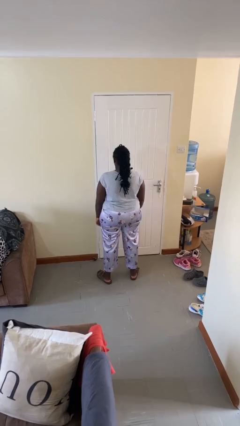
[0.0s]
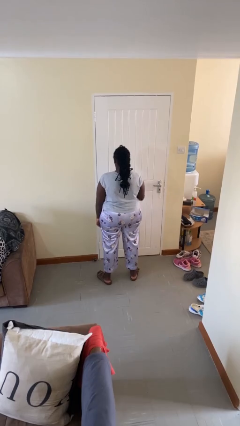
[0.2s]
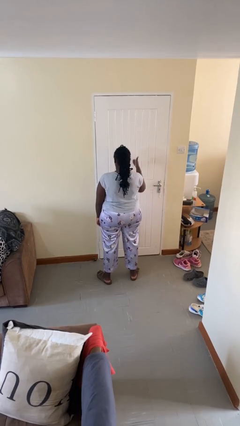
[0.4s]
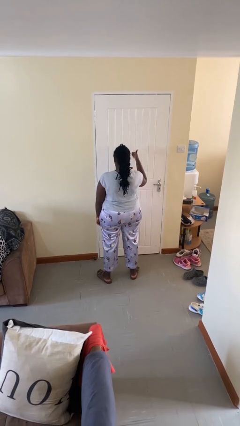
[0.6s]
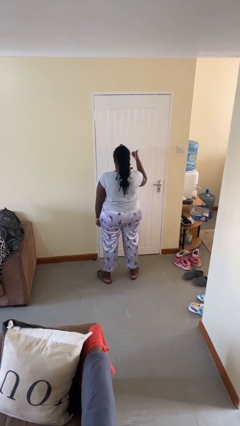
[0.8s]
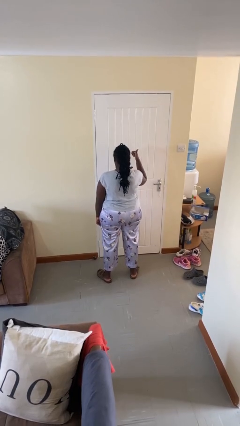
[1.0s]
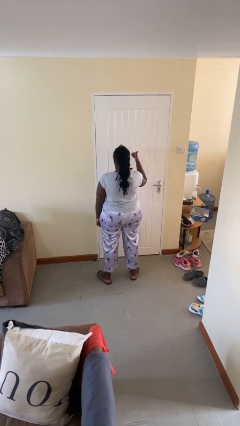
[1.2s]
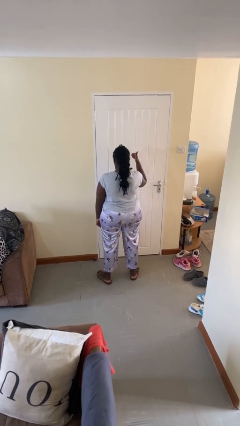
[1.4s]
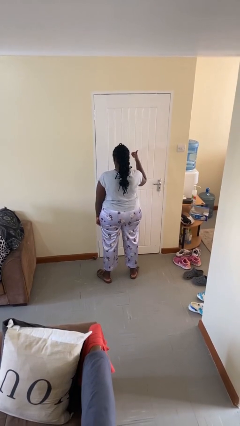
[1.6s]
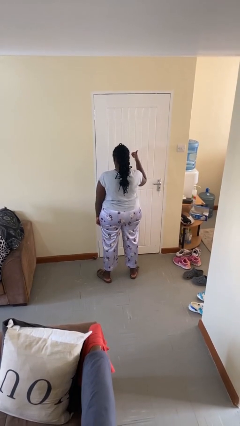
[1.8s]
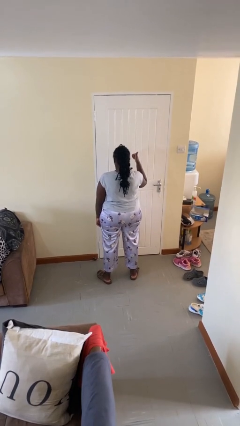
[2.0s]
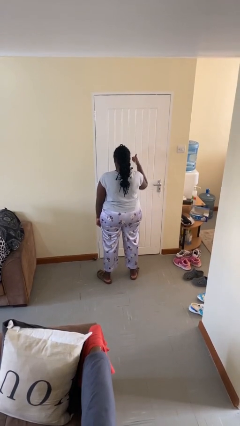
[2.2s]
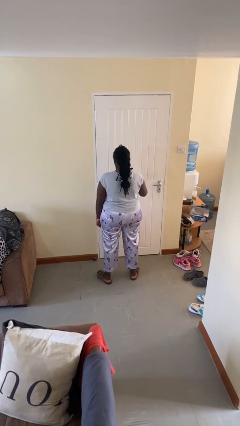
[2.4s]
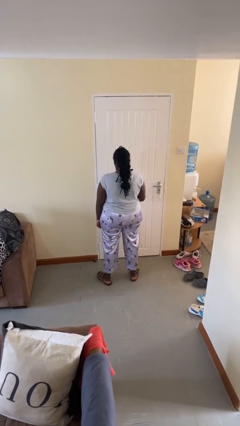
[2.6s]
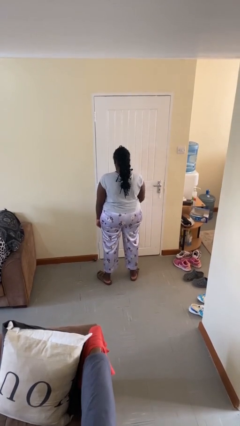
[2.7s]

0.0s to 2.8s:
person gestures thumbs up

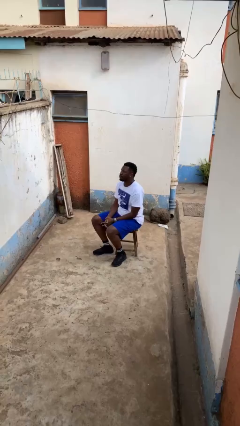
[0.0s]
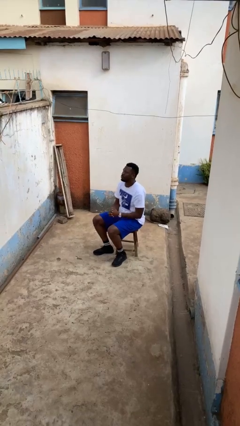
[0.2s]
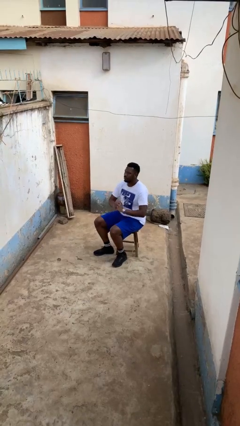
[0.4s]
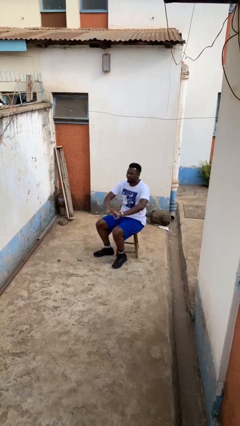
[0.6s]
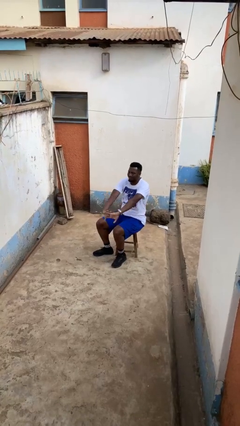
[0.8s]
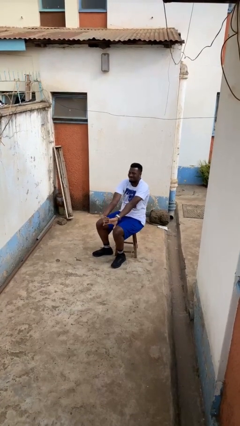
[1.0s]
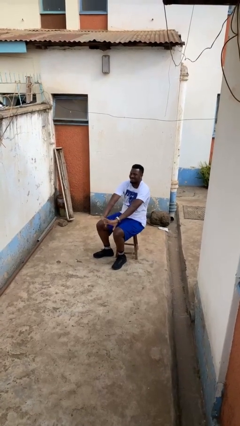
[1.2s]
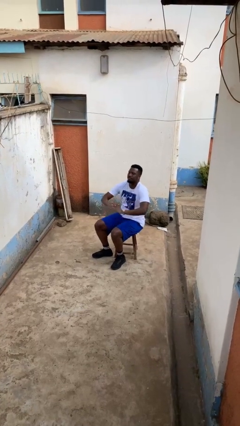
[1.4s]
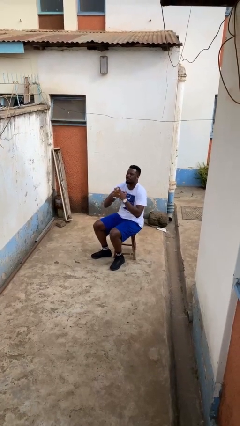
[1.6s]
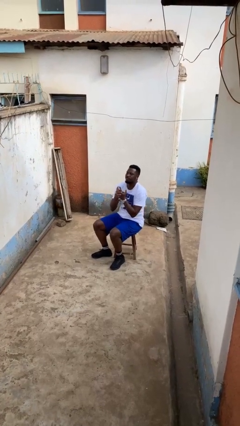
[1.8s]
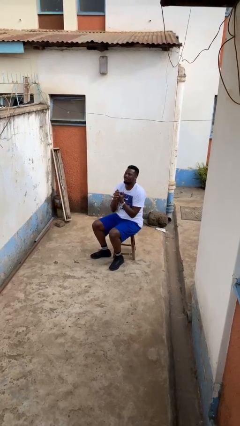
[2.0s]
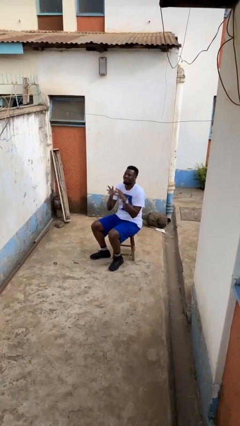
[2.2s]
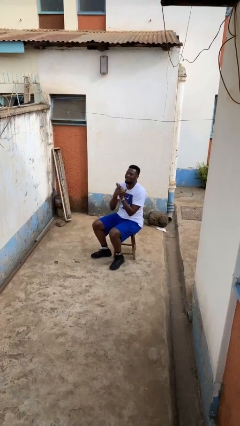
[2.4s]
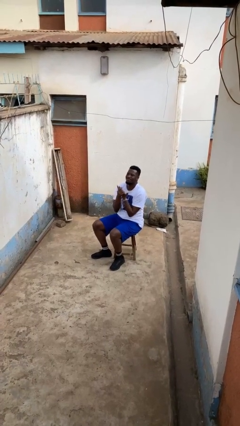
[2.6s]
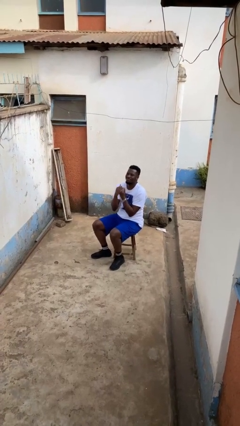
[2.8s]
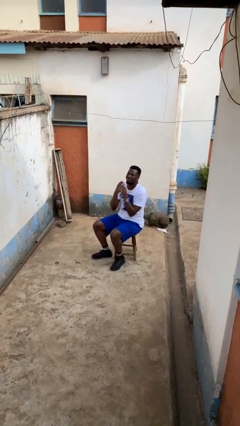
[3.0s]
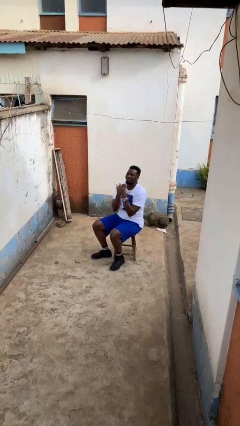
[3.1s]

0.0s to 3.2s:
person cracks knuckles

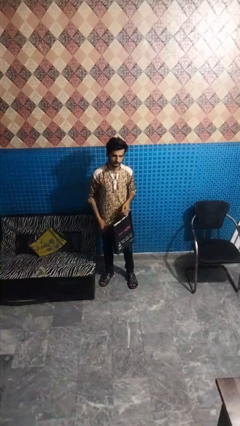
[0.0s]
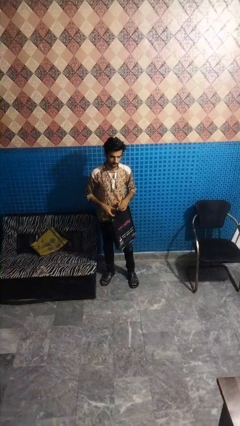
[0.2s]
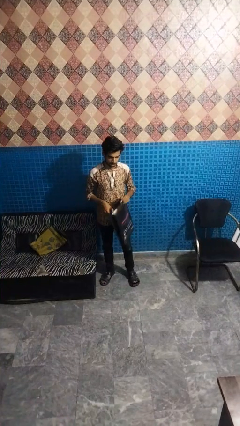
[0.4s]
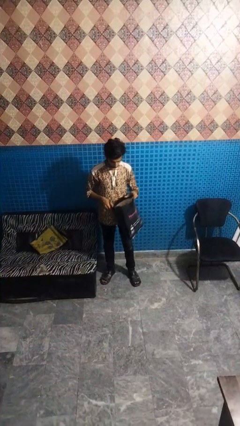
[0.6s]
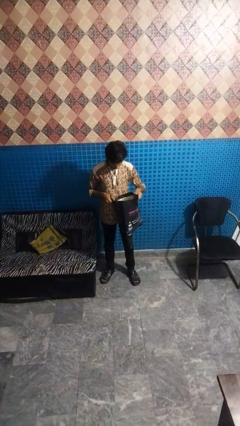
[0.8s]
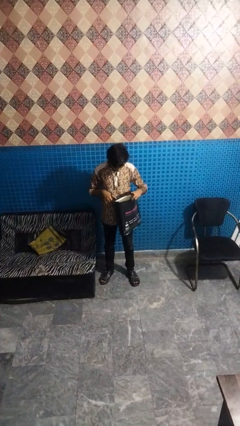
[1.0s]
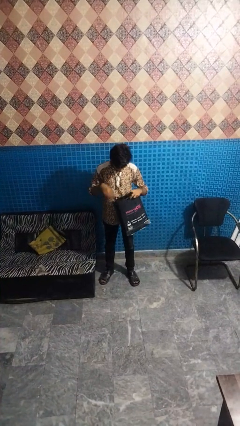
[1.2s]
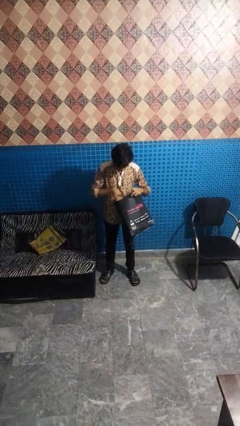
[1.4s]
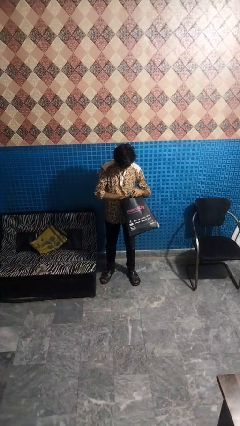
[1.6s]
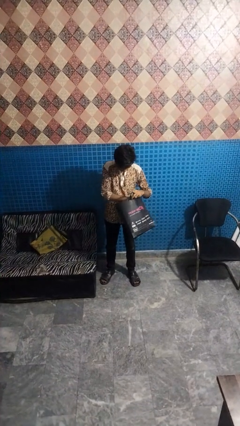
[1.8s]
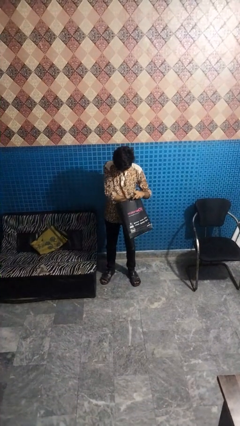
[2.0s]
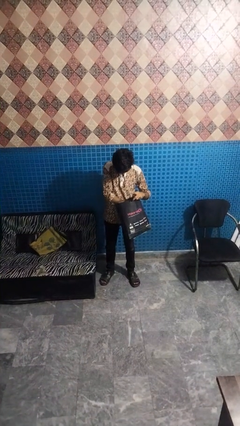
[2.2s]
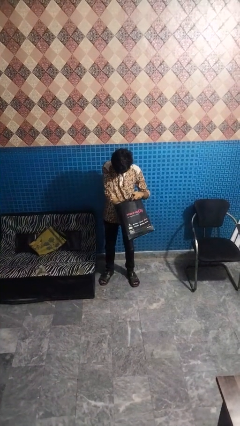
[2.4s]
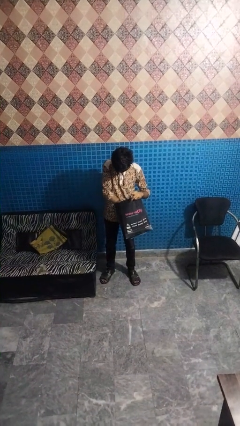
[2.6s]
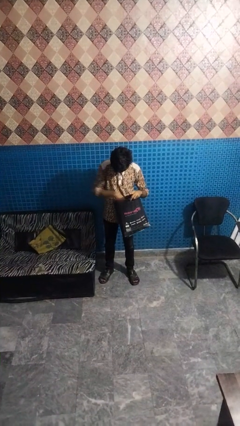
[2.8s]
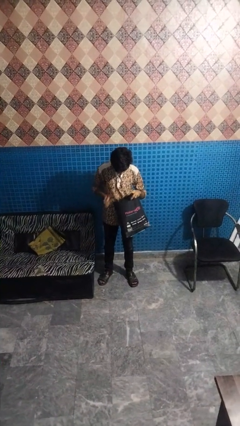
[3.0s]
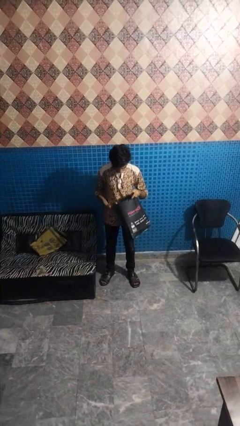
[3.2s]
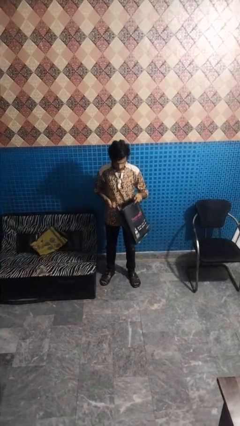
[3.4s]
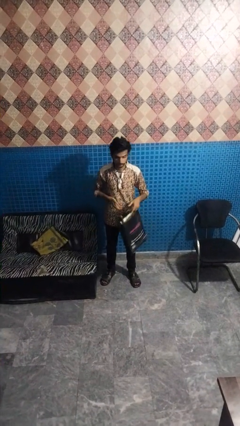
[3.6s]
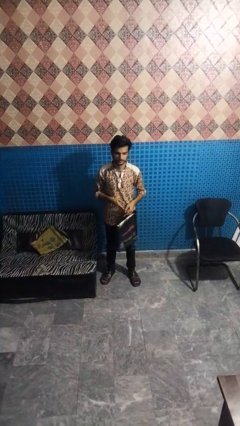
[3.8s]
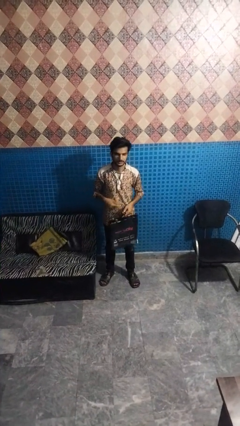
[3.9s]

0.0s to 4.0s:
person searches in bag

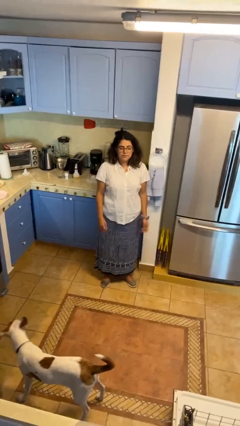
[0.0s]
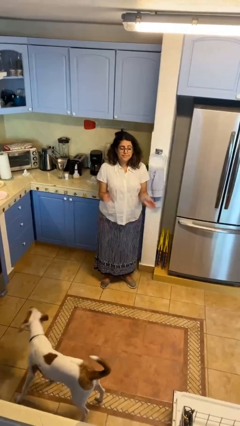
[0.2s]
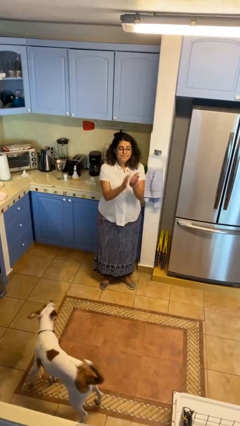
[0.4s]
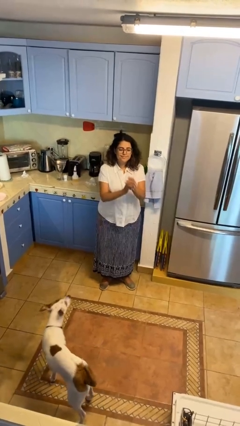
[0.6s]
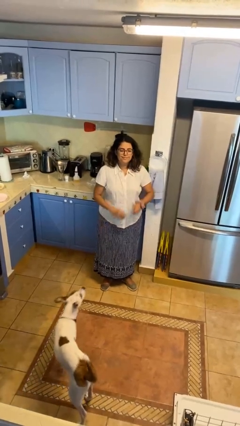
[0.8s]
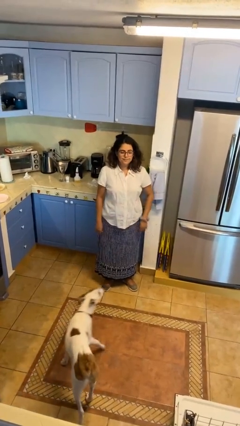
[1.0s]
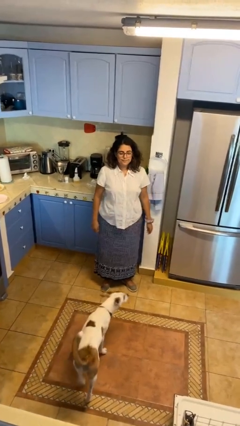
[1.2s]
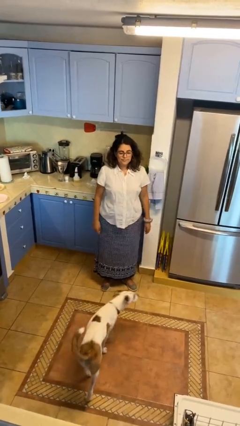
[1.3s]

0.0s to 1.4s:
person claps hands

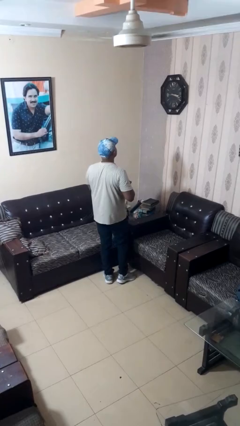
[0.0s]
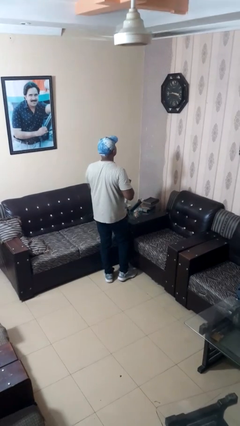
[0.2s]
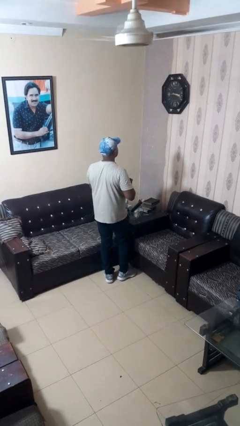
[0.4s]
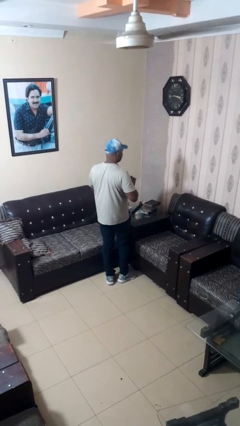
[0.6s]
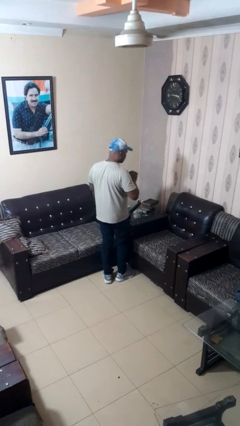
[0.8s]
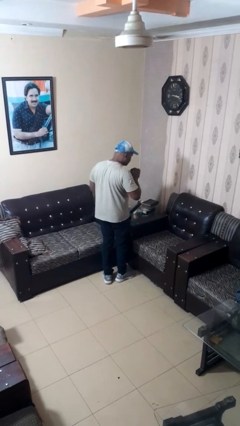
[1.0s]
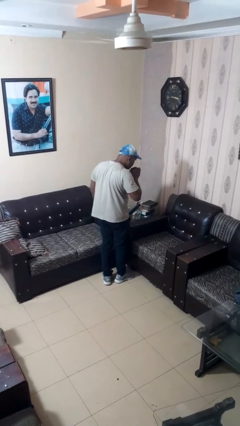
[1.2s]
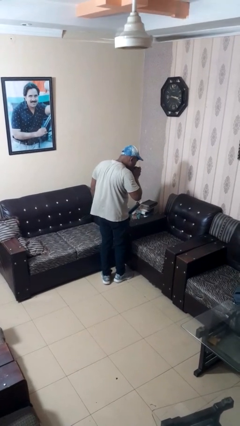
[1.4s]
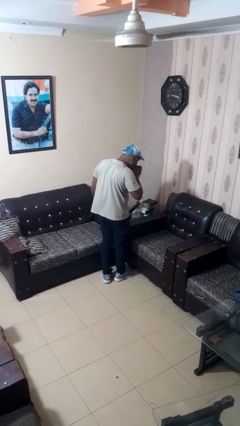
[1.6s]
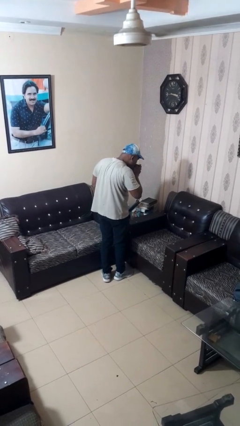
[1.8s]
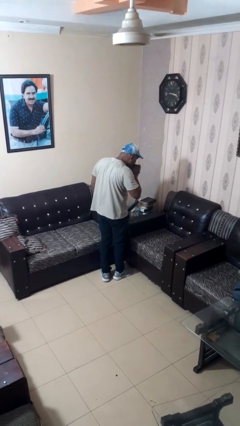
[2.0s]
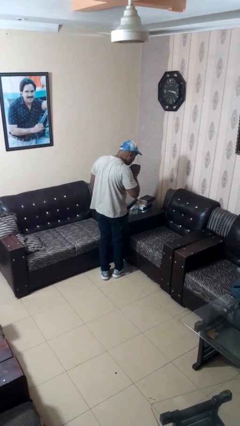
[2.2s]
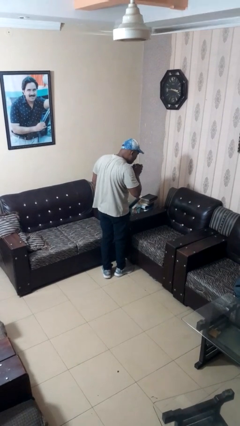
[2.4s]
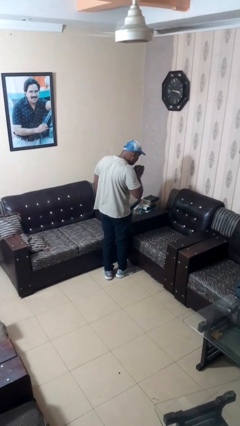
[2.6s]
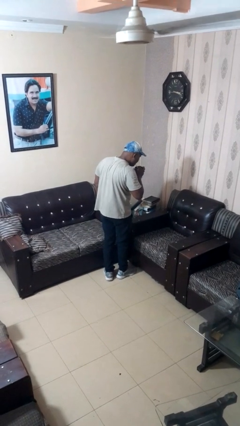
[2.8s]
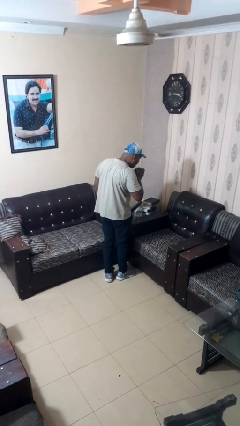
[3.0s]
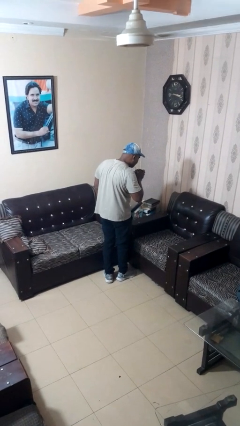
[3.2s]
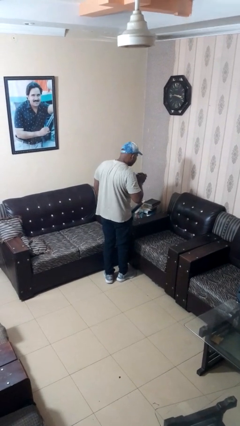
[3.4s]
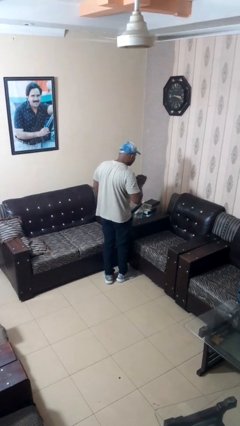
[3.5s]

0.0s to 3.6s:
person drinks from straw

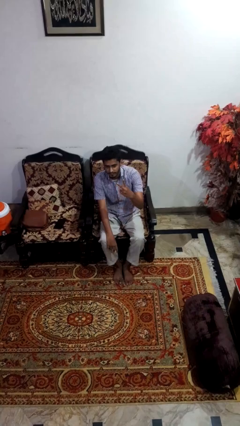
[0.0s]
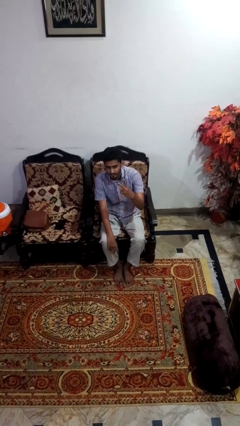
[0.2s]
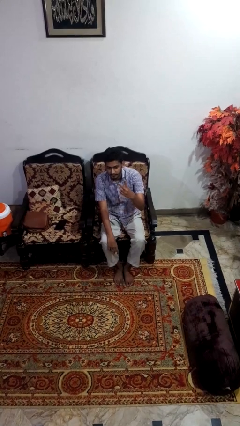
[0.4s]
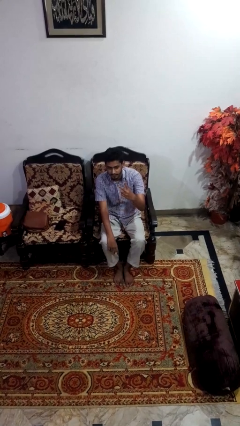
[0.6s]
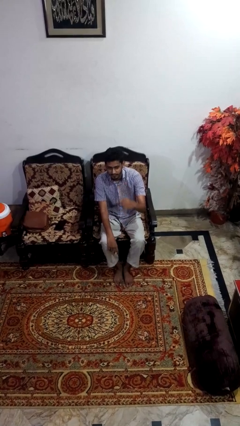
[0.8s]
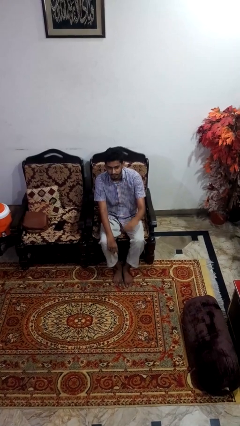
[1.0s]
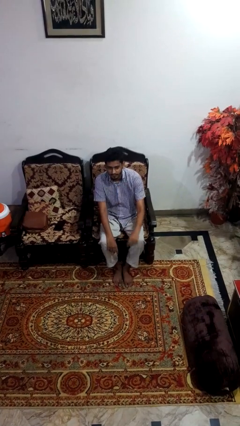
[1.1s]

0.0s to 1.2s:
person gestures peace

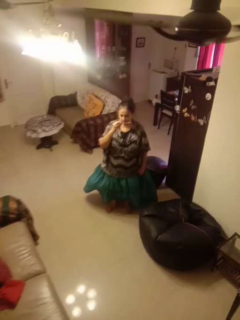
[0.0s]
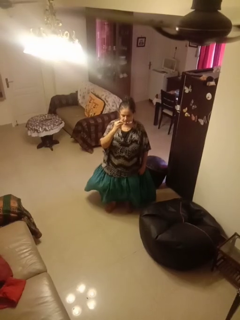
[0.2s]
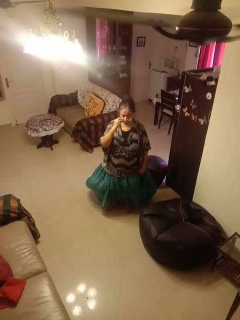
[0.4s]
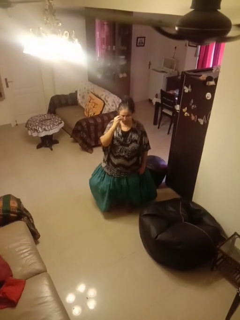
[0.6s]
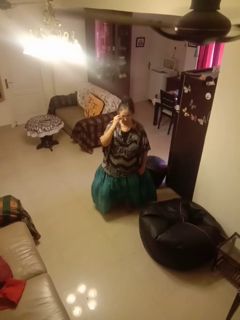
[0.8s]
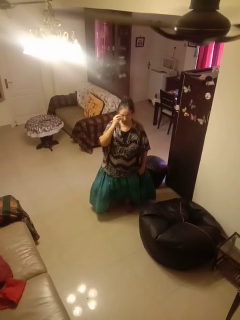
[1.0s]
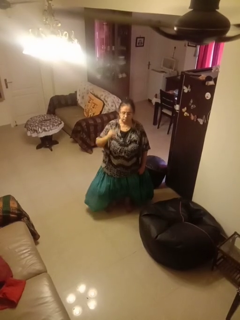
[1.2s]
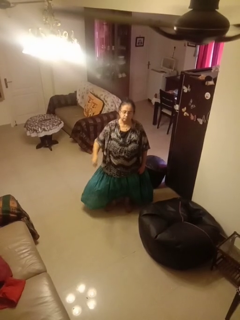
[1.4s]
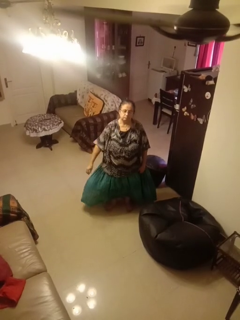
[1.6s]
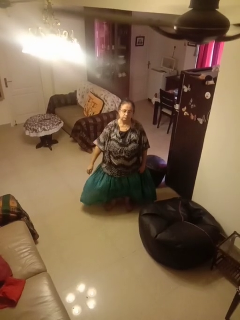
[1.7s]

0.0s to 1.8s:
person puts on glasses
